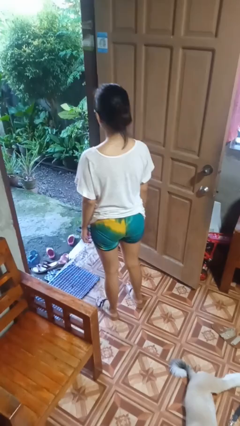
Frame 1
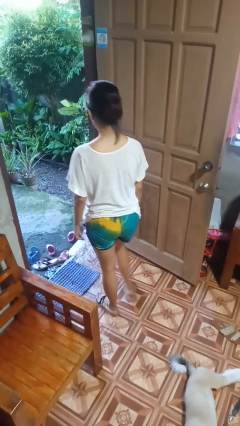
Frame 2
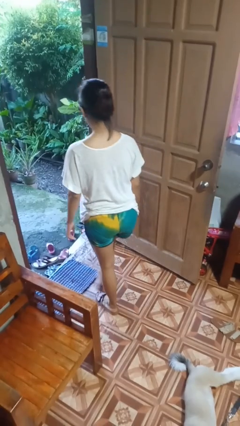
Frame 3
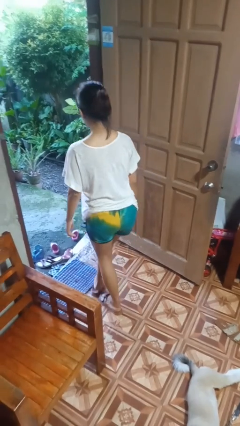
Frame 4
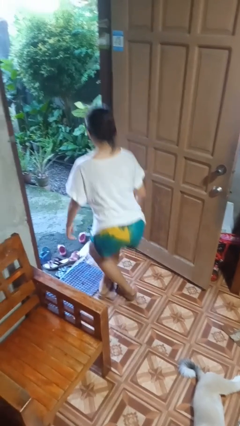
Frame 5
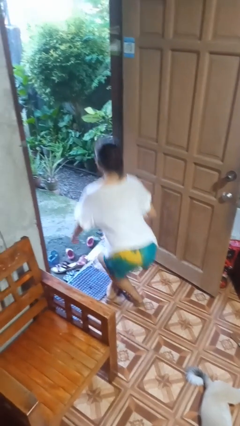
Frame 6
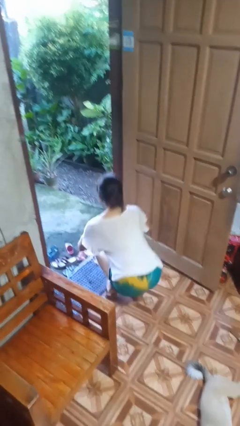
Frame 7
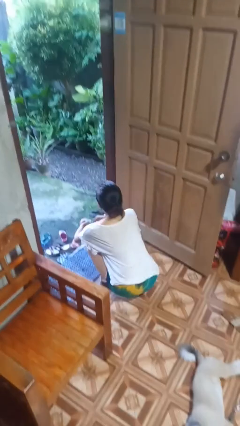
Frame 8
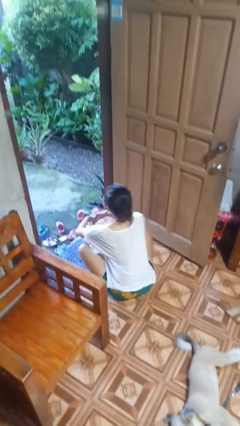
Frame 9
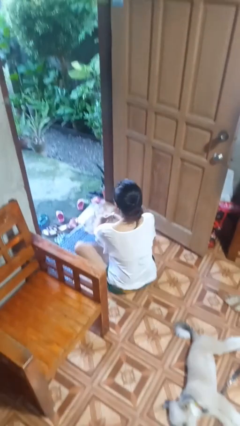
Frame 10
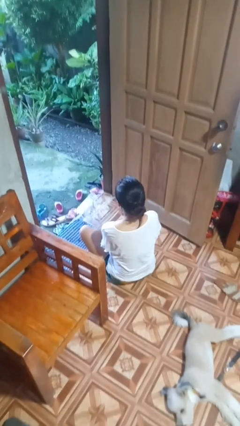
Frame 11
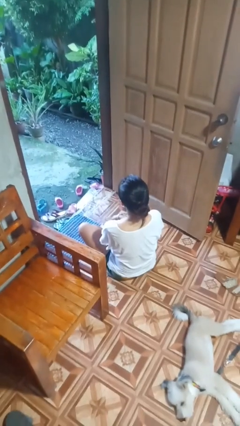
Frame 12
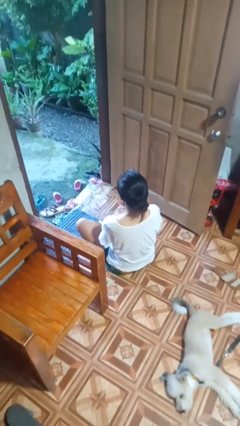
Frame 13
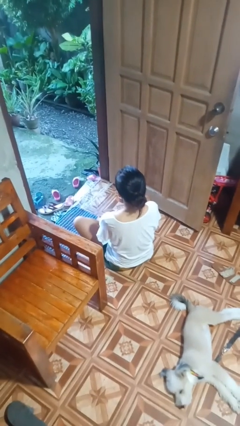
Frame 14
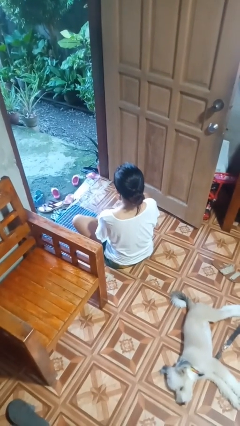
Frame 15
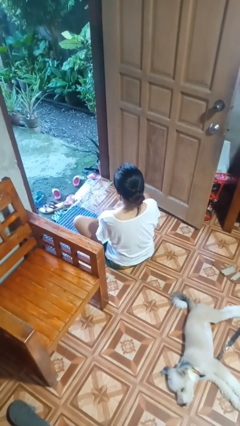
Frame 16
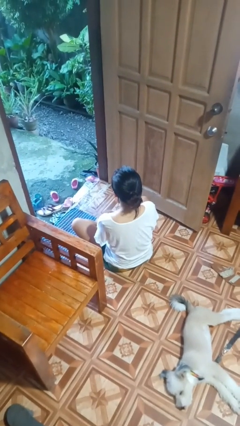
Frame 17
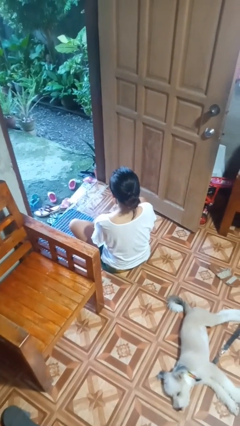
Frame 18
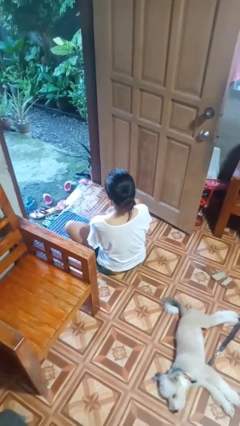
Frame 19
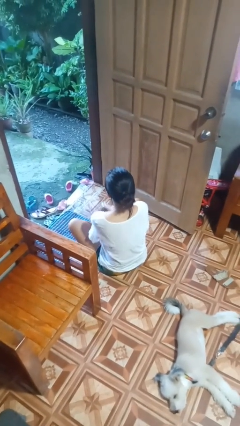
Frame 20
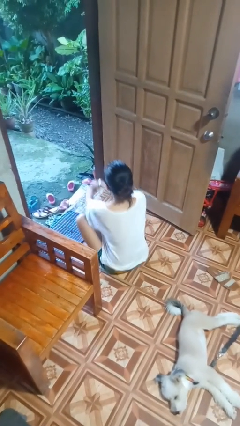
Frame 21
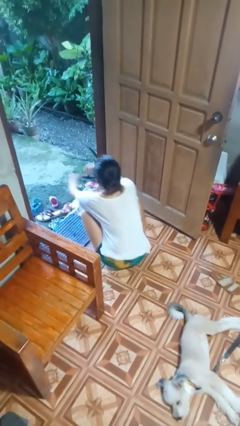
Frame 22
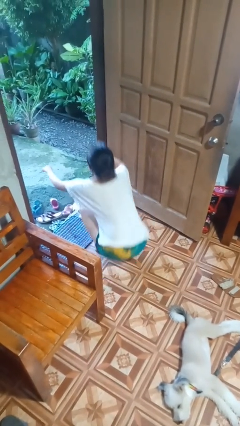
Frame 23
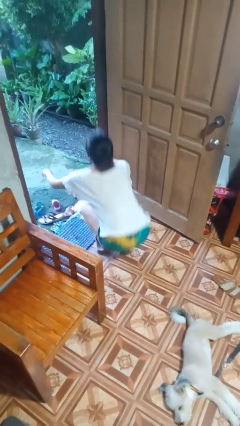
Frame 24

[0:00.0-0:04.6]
person sits crisscross

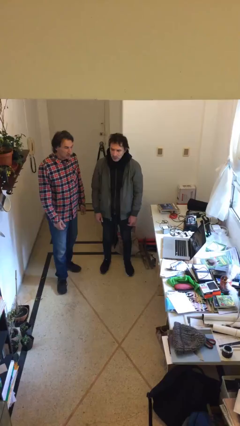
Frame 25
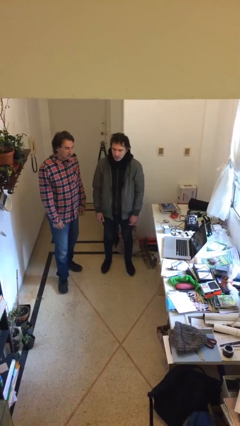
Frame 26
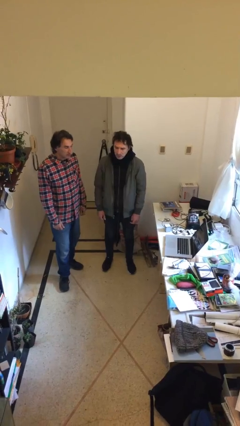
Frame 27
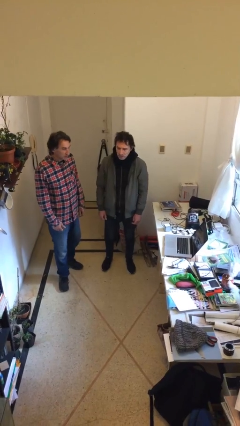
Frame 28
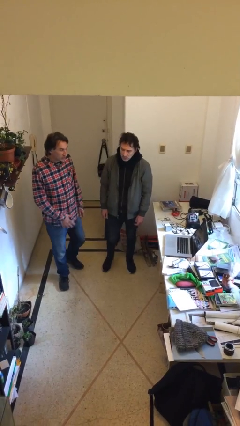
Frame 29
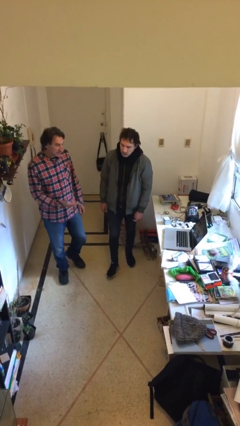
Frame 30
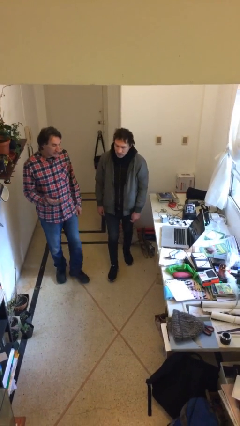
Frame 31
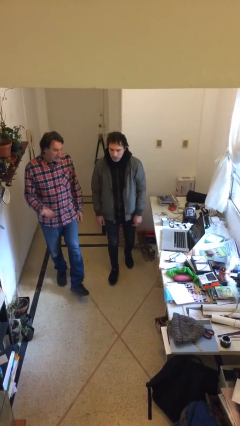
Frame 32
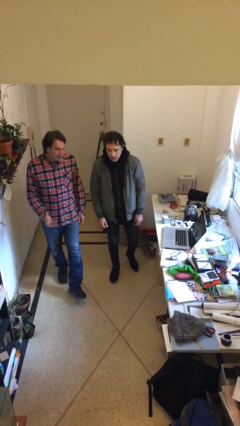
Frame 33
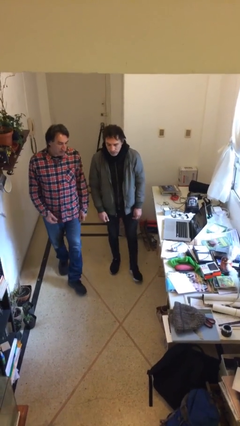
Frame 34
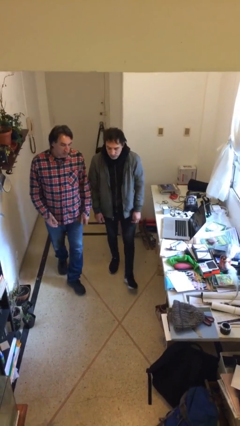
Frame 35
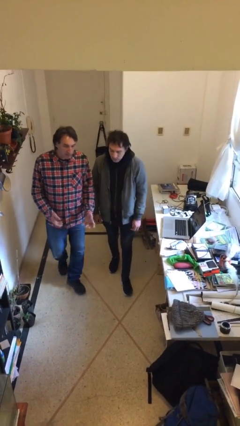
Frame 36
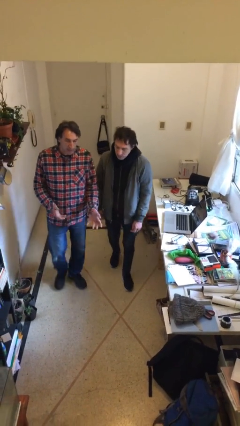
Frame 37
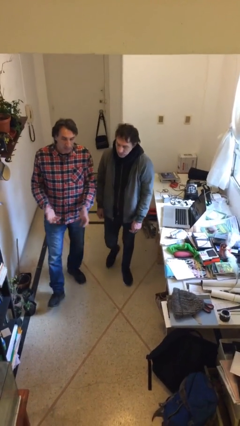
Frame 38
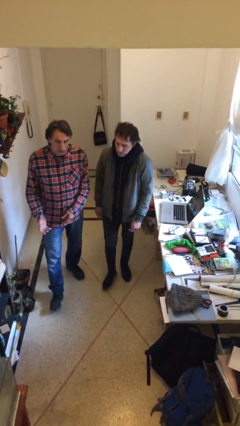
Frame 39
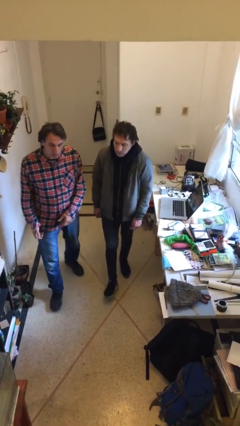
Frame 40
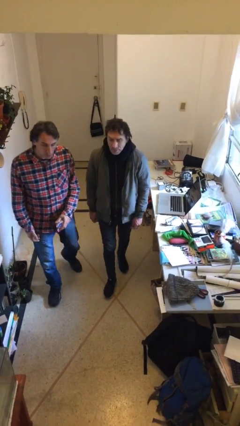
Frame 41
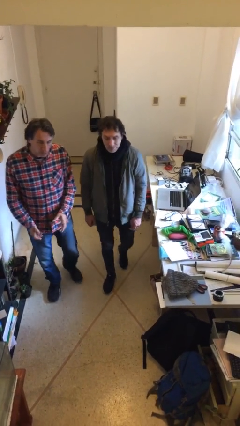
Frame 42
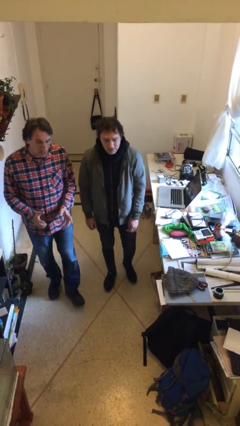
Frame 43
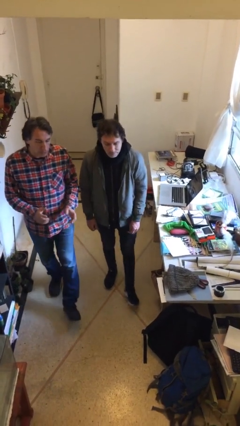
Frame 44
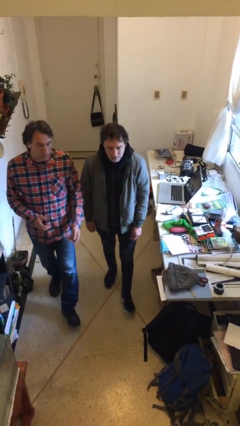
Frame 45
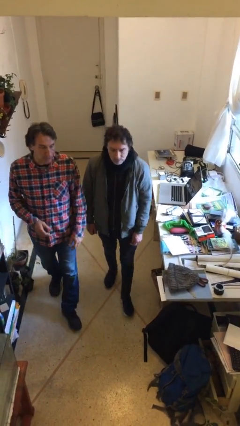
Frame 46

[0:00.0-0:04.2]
person talks to person

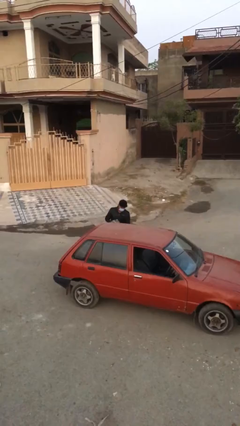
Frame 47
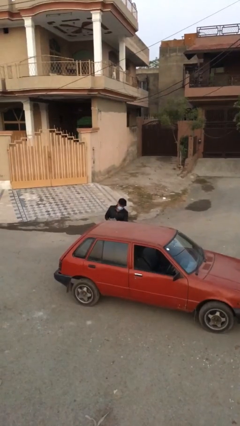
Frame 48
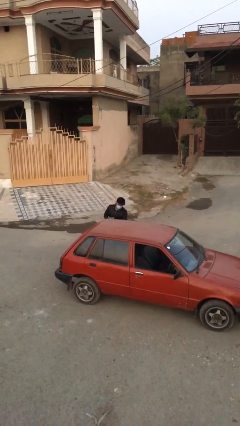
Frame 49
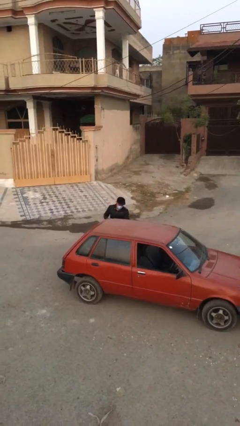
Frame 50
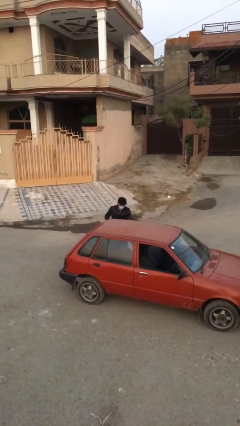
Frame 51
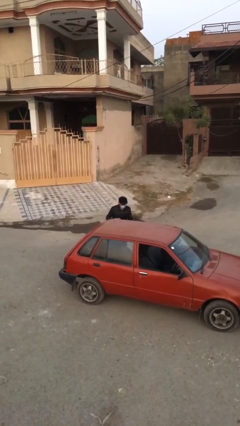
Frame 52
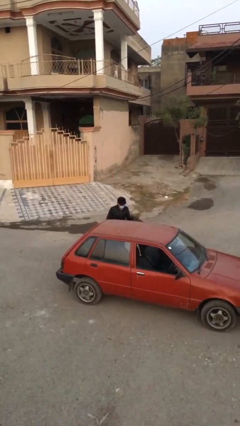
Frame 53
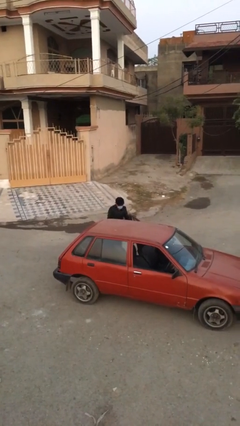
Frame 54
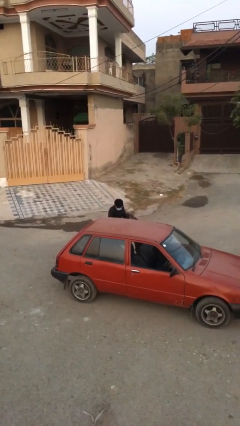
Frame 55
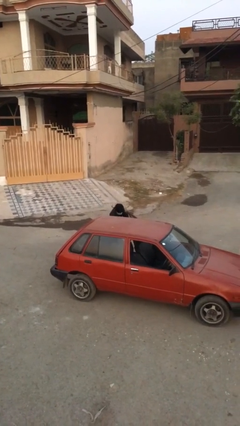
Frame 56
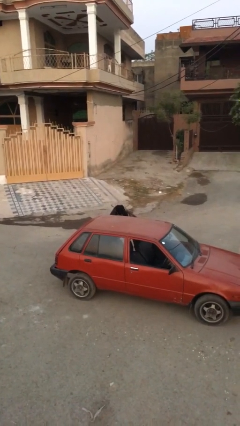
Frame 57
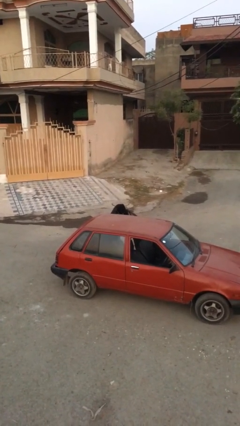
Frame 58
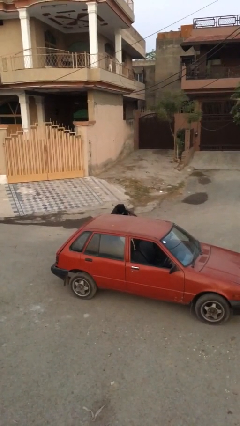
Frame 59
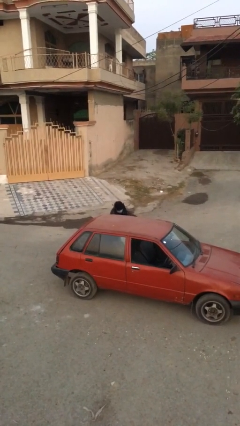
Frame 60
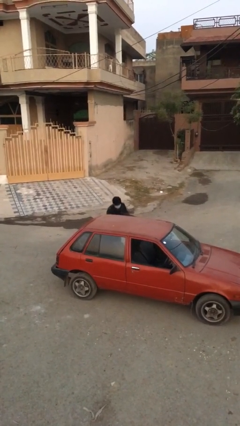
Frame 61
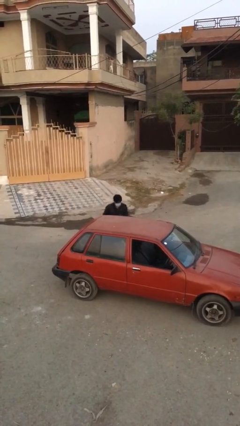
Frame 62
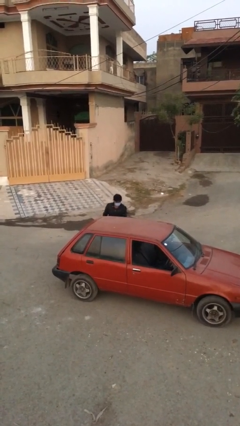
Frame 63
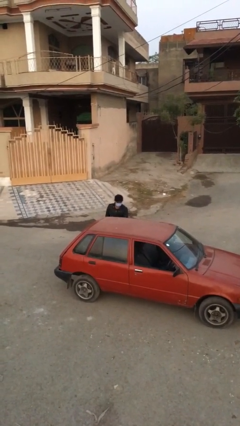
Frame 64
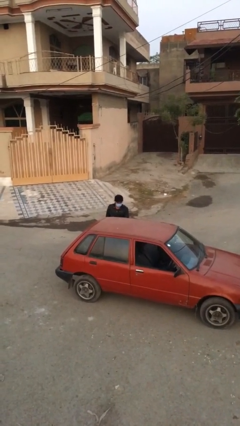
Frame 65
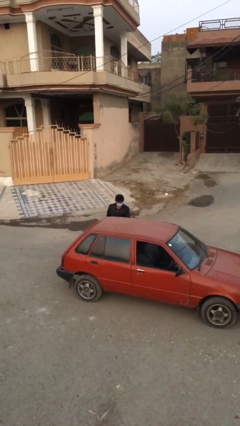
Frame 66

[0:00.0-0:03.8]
person loads car

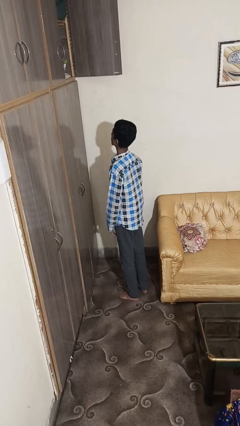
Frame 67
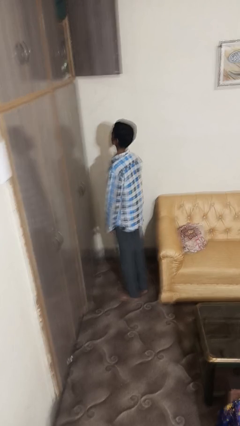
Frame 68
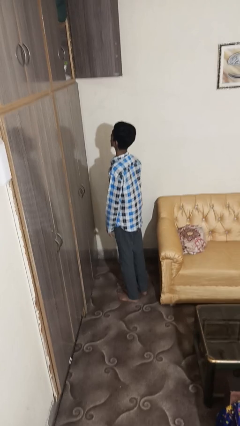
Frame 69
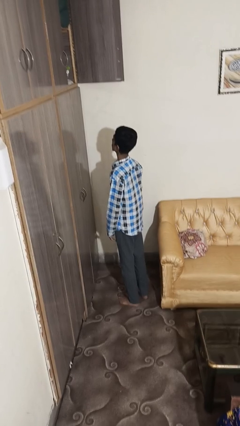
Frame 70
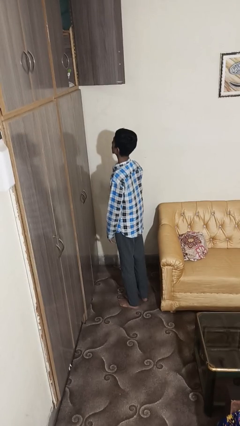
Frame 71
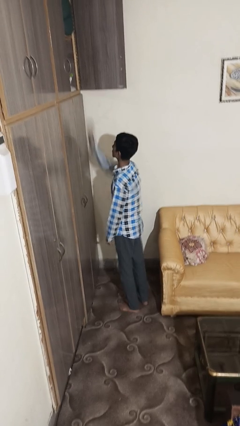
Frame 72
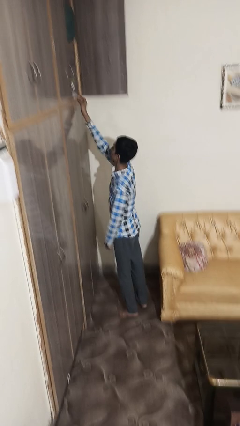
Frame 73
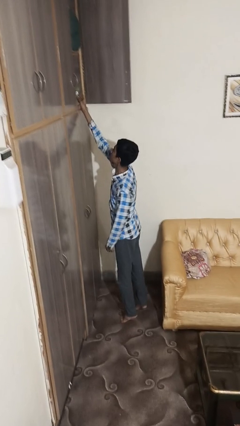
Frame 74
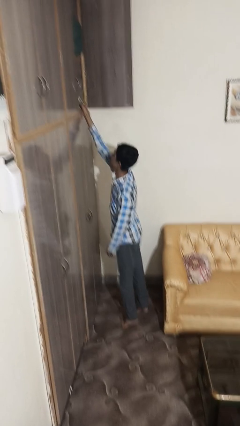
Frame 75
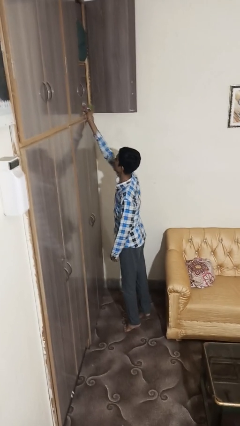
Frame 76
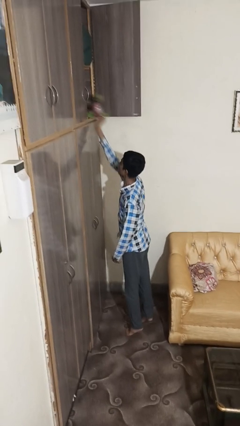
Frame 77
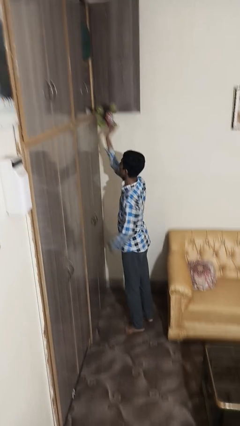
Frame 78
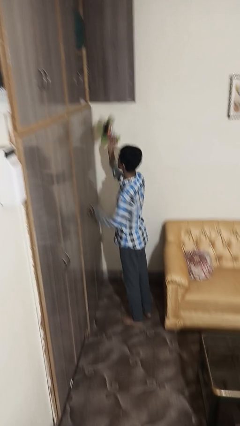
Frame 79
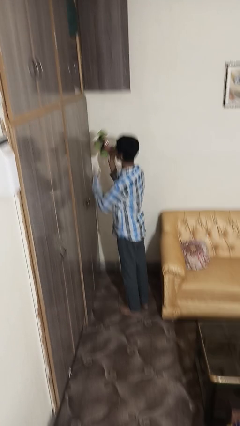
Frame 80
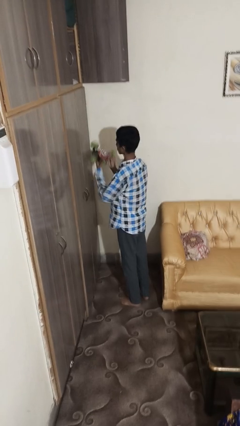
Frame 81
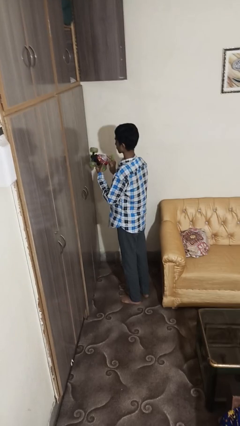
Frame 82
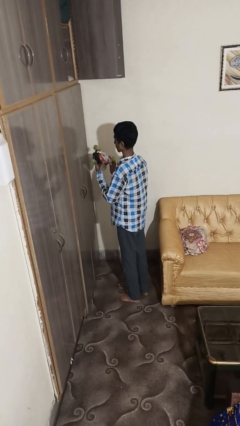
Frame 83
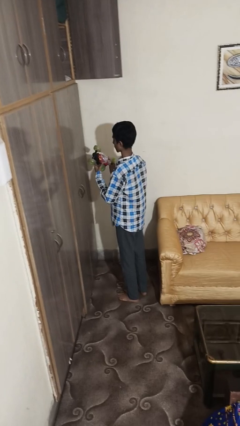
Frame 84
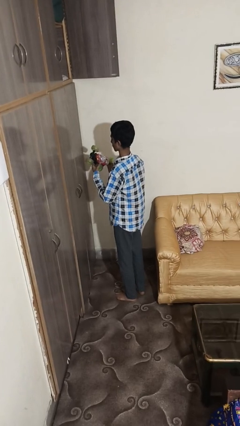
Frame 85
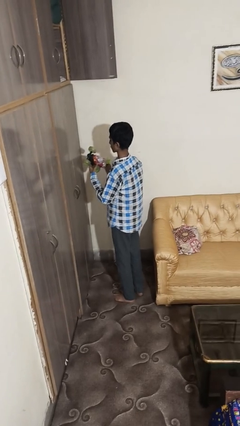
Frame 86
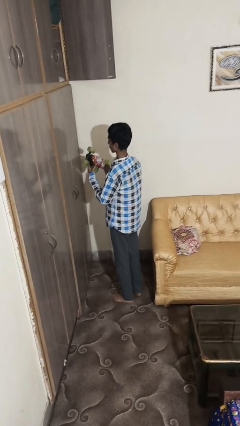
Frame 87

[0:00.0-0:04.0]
person picks up object from shelf

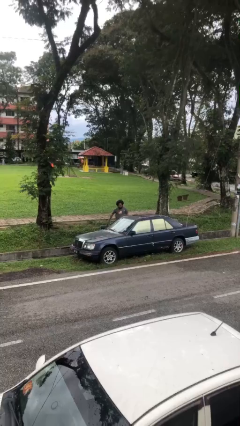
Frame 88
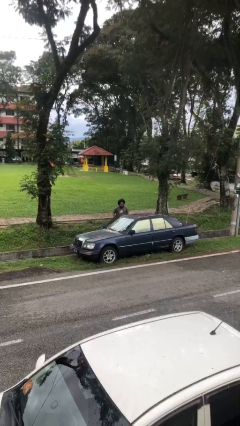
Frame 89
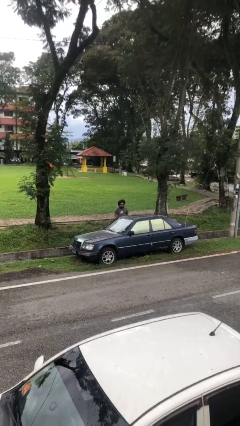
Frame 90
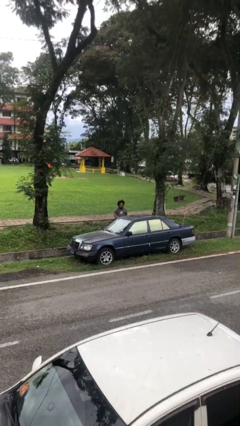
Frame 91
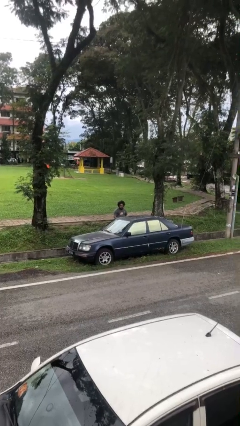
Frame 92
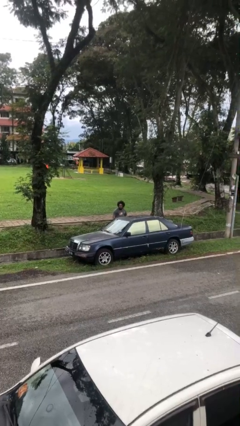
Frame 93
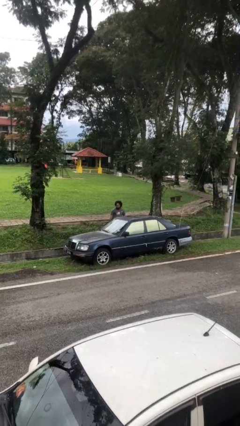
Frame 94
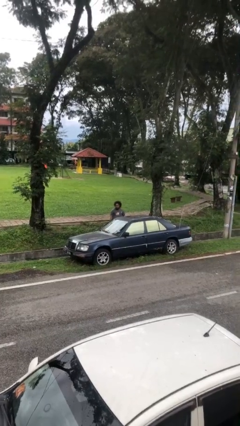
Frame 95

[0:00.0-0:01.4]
person closes car door
